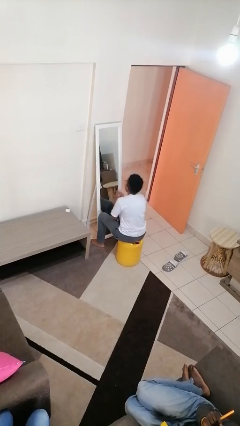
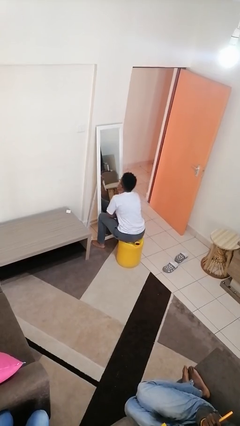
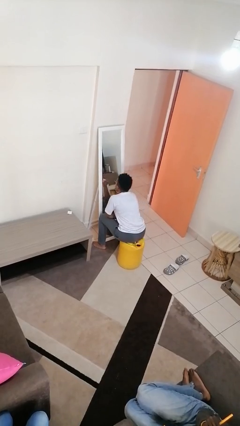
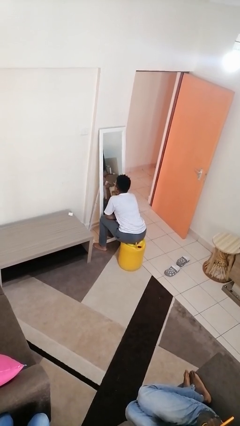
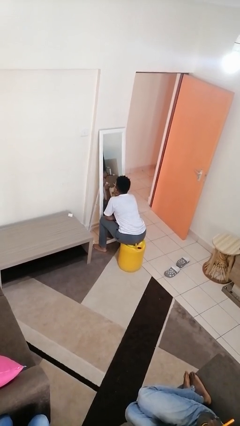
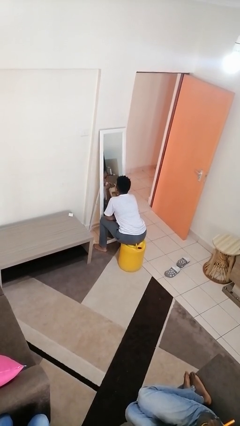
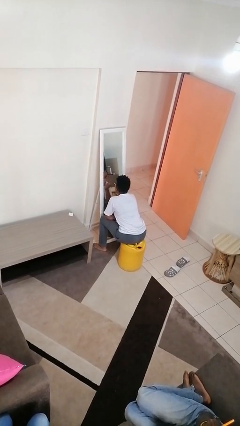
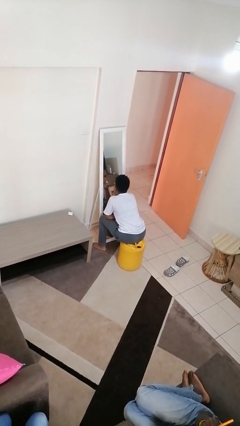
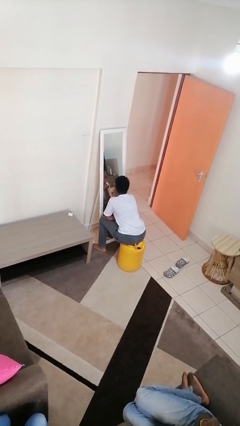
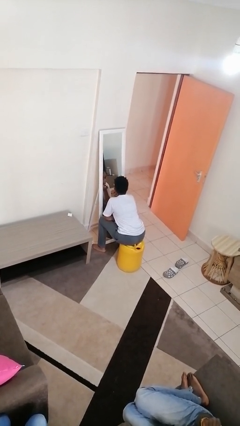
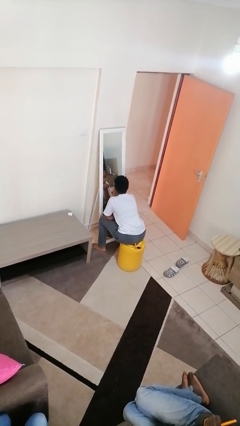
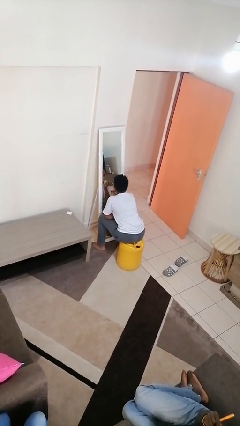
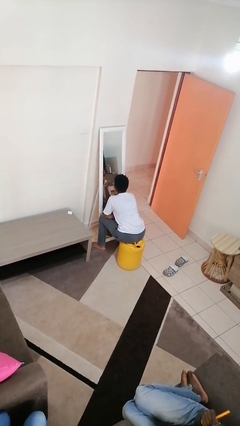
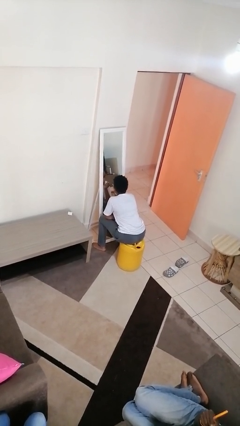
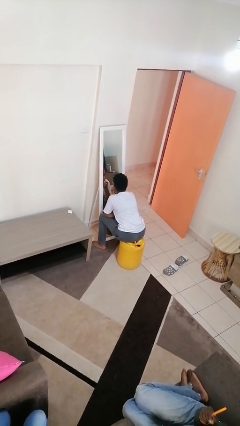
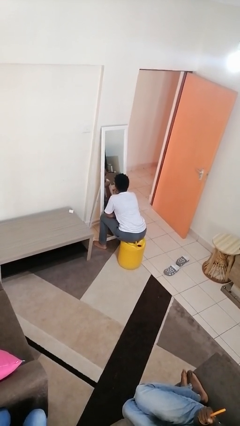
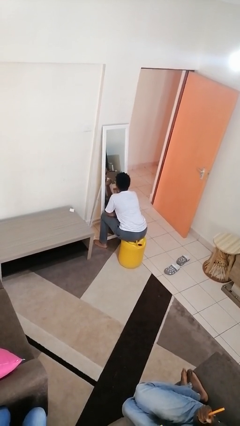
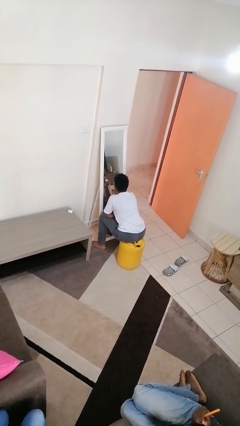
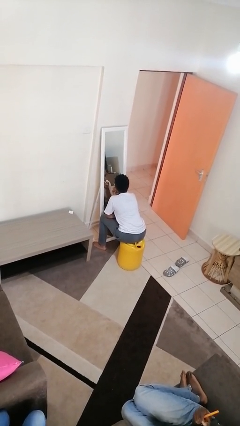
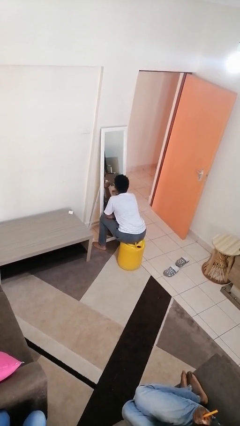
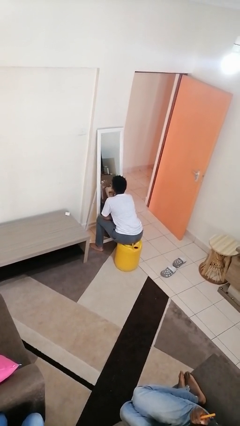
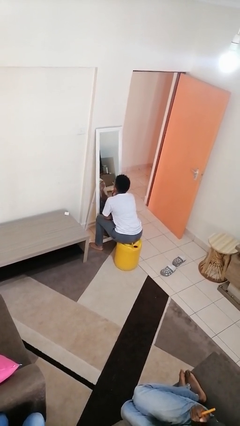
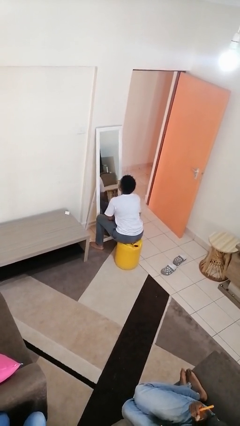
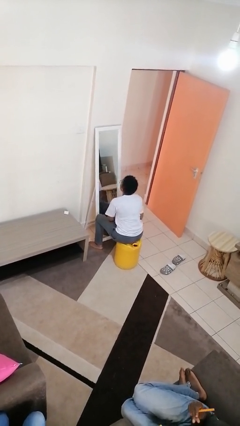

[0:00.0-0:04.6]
person applies lip makeup

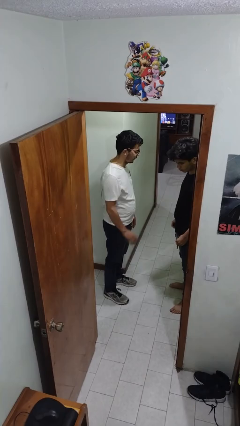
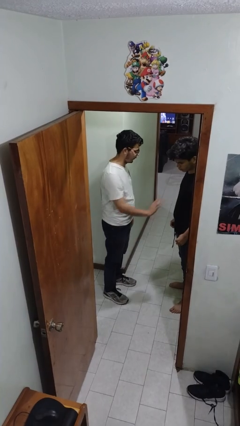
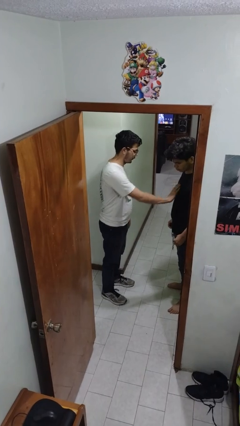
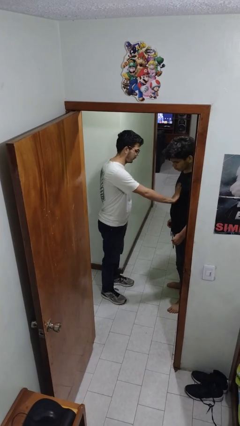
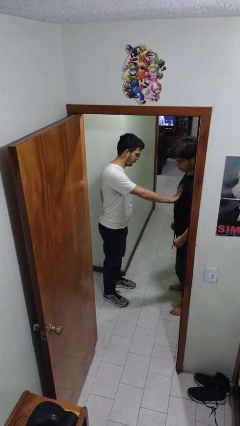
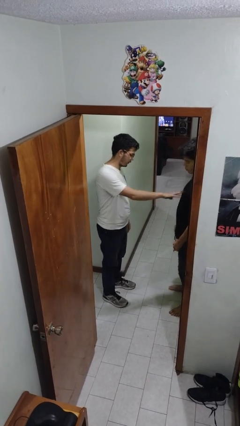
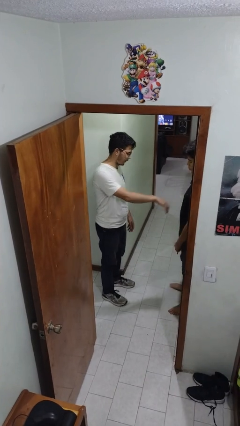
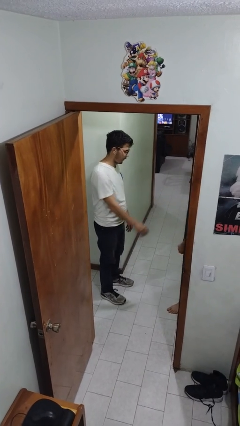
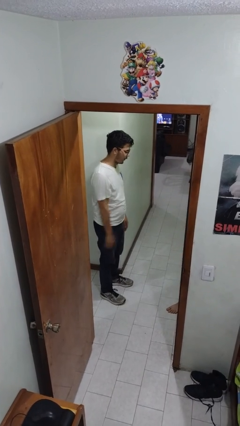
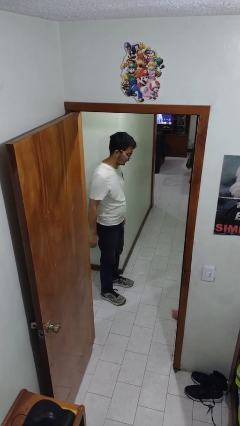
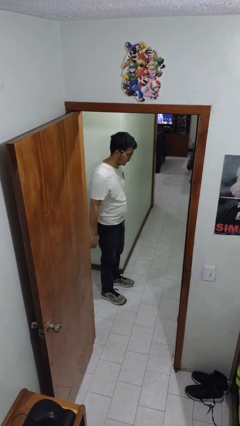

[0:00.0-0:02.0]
person shoves person

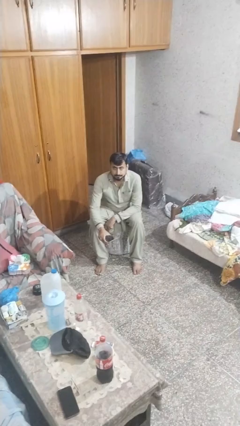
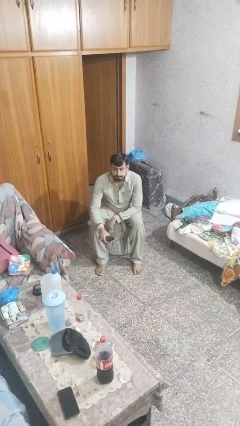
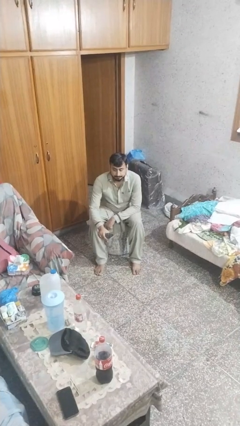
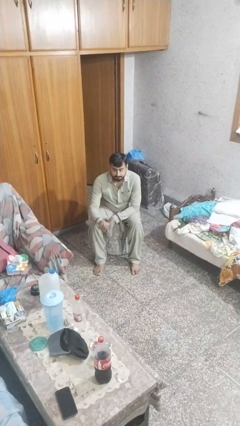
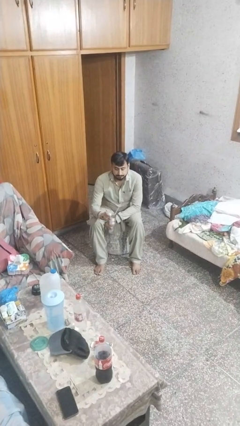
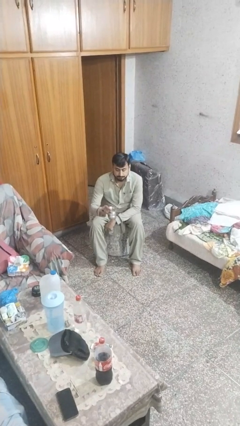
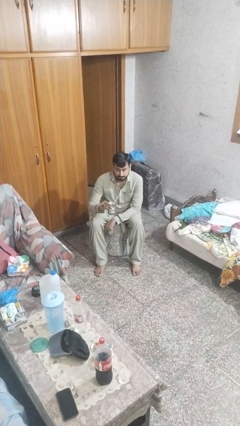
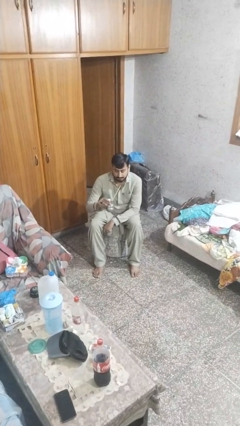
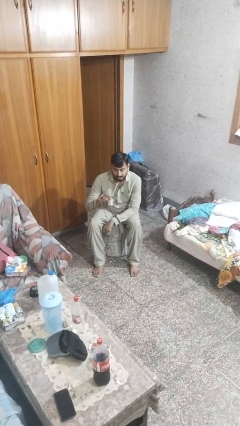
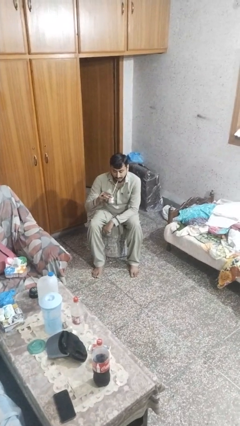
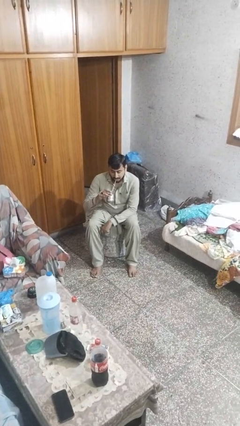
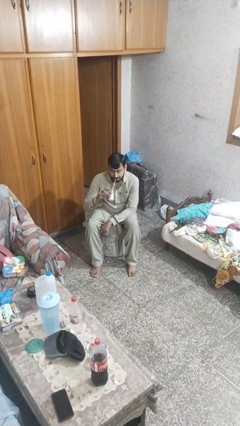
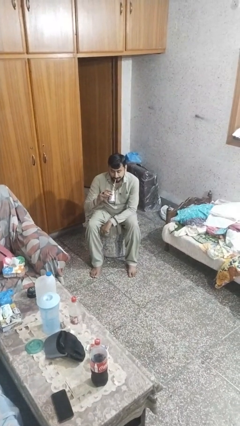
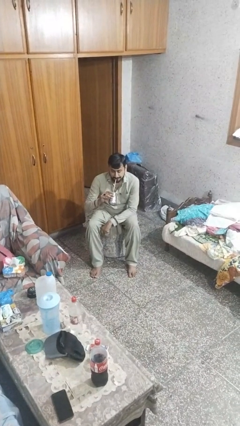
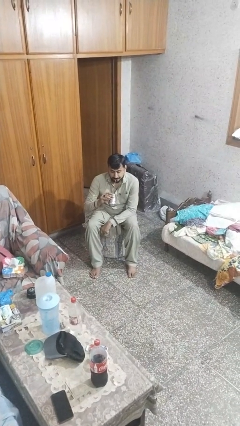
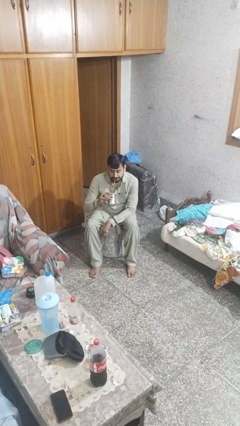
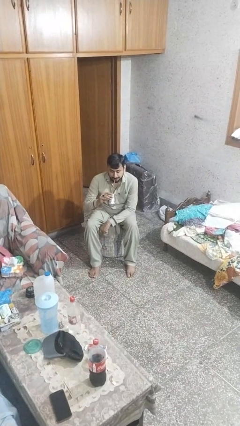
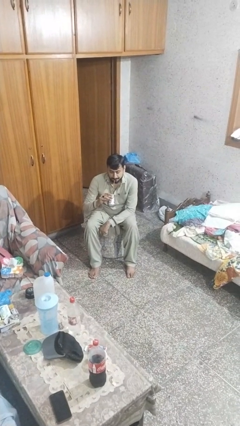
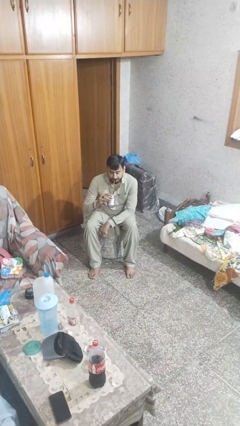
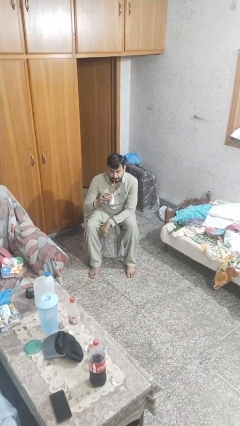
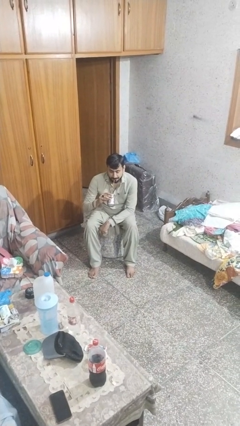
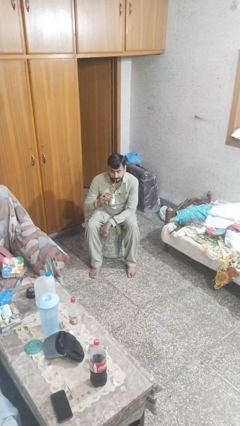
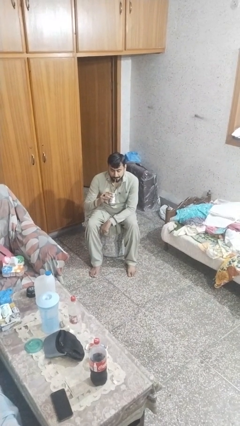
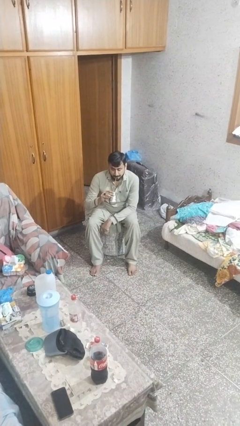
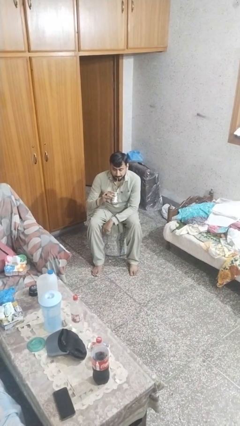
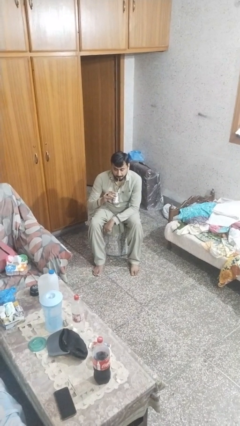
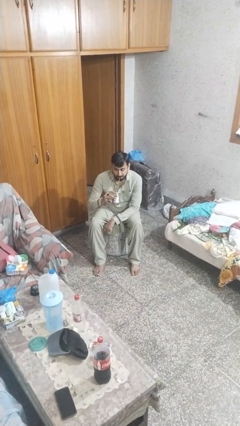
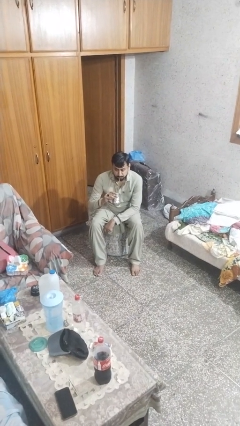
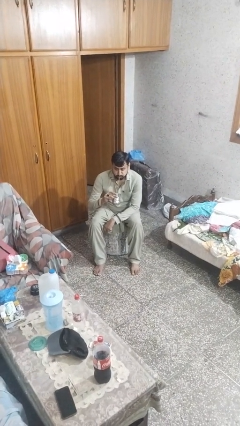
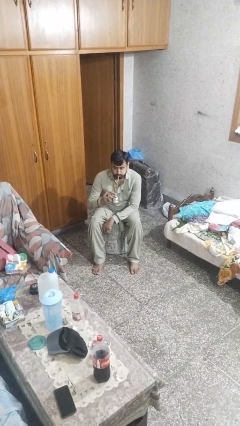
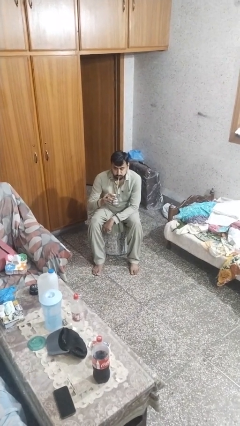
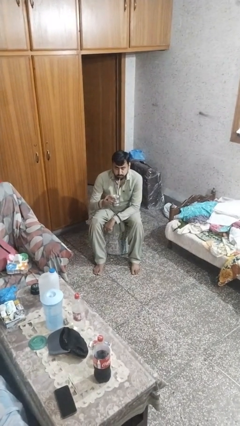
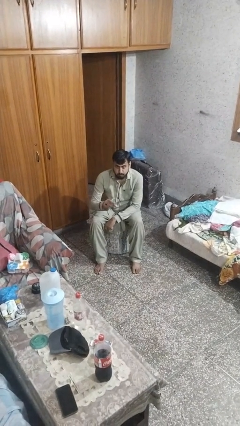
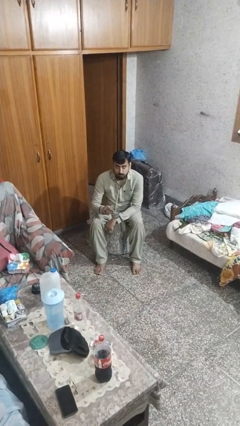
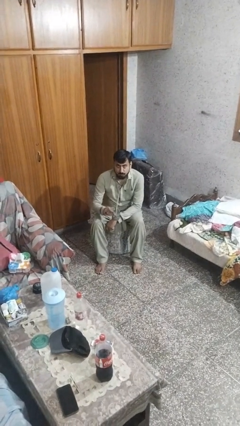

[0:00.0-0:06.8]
person drinks from straw

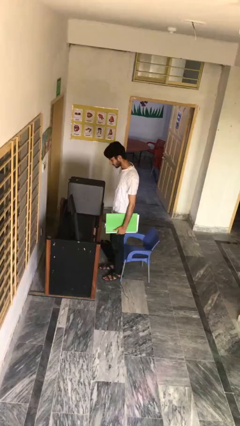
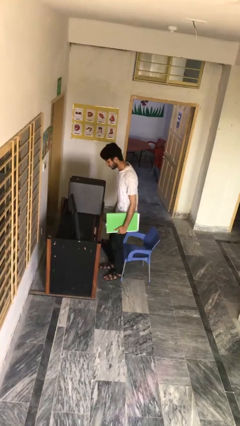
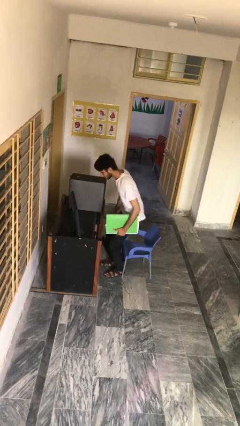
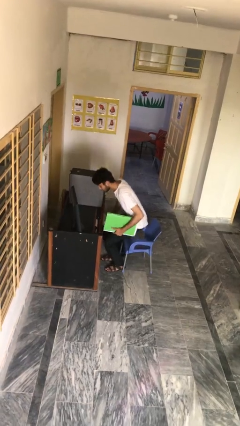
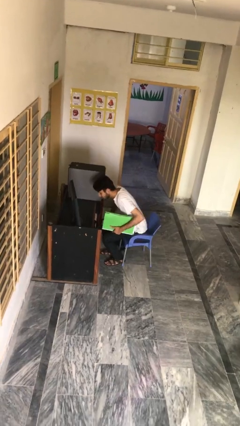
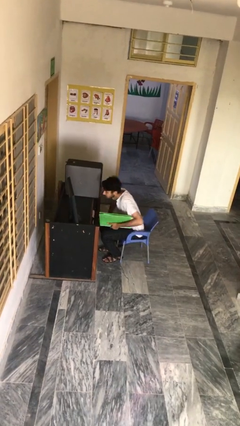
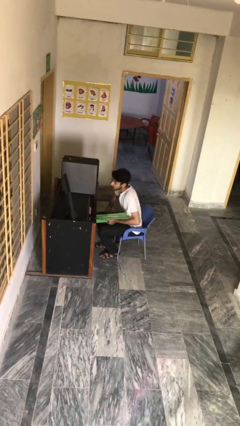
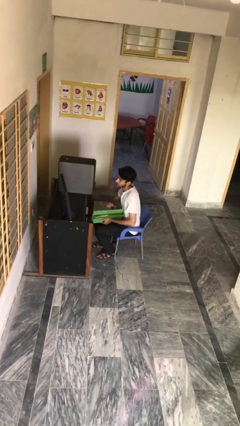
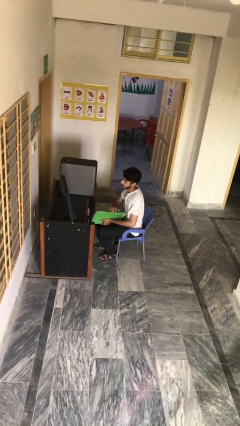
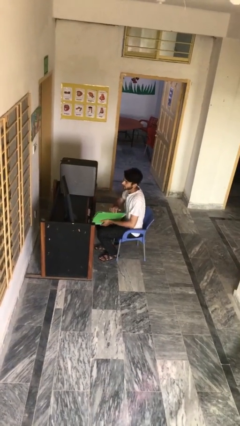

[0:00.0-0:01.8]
person sits down

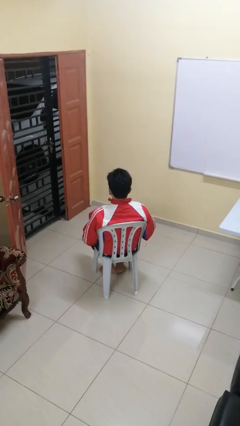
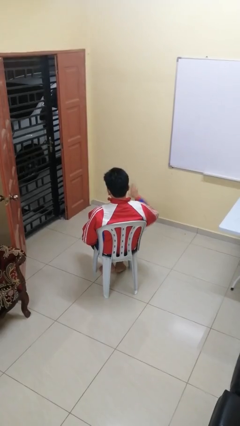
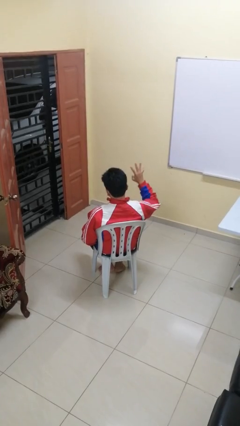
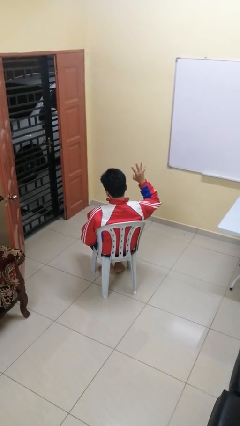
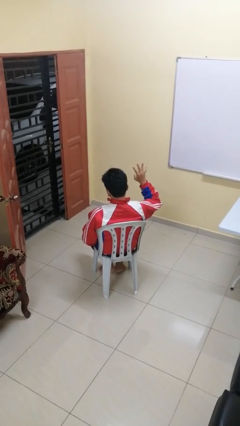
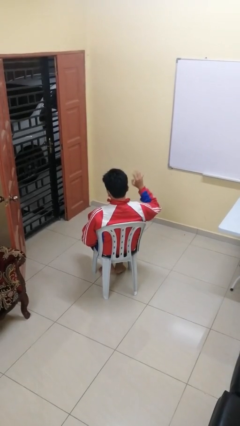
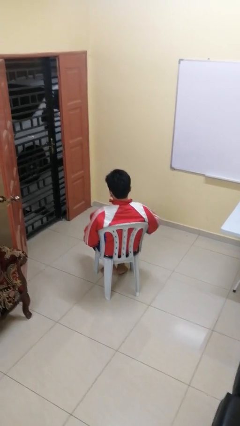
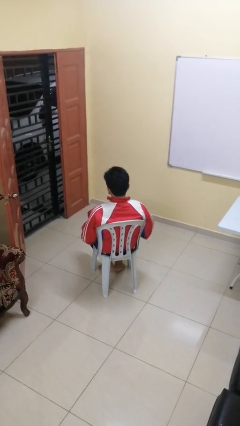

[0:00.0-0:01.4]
person gestures number four

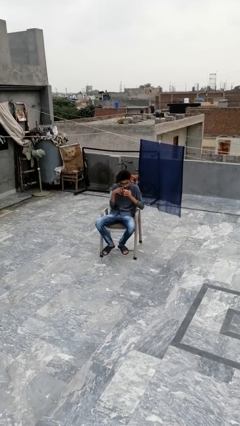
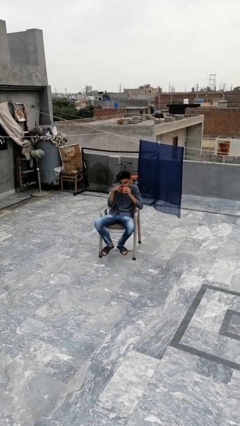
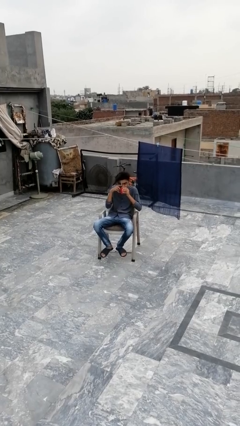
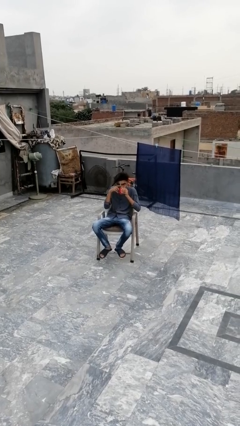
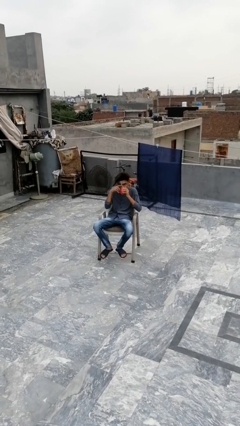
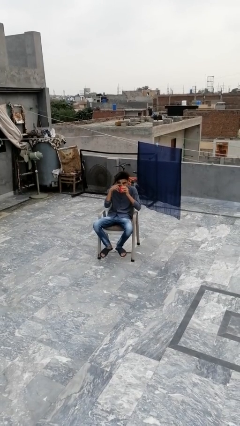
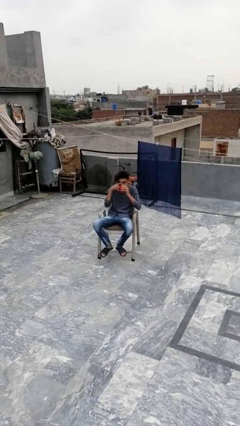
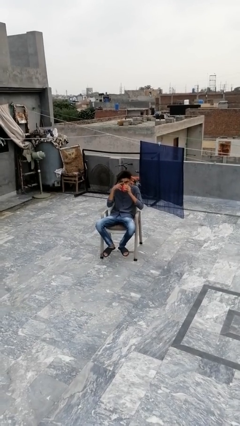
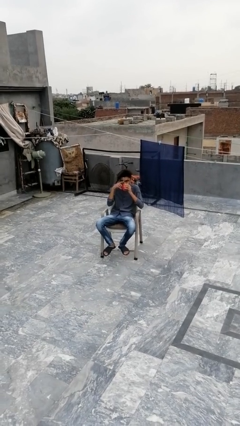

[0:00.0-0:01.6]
person drinks from mug
